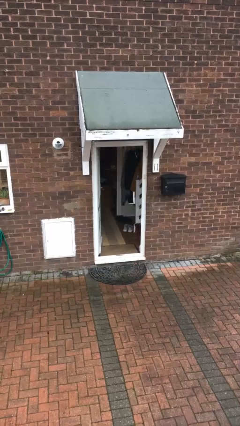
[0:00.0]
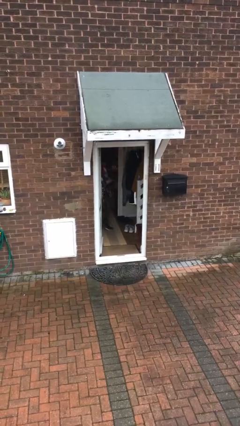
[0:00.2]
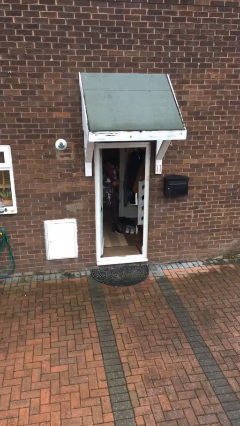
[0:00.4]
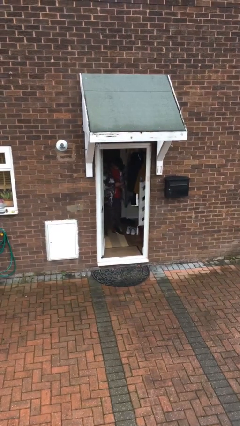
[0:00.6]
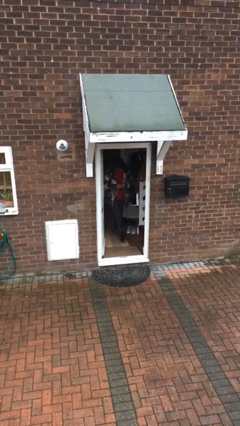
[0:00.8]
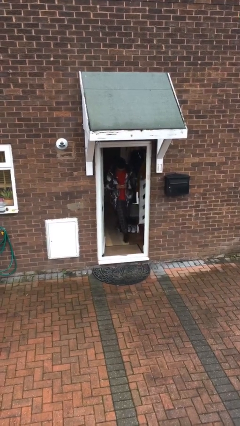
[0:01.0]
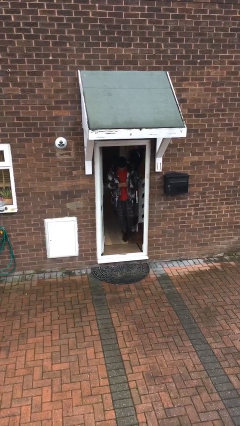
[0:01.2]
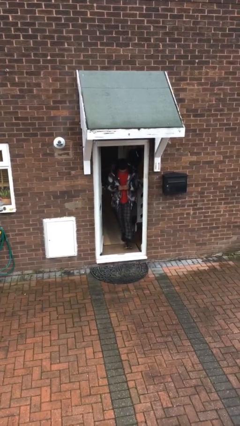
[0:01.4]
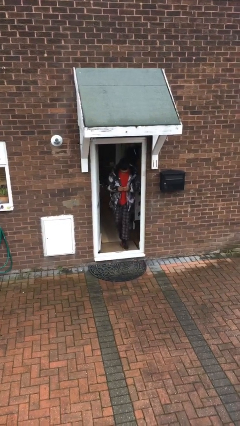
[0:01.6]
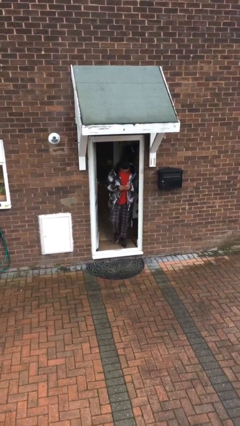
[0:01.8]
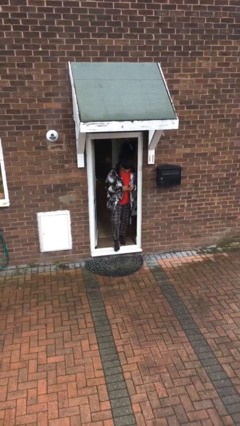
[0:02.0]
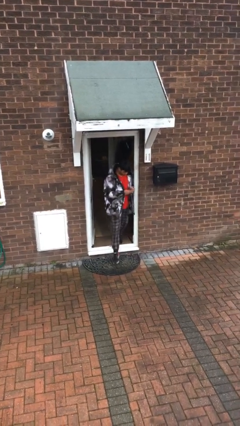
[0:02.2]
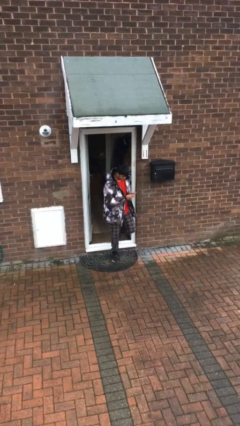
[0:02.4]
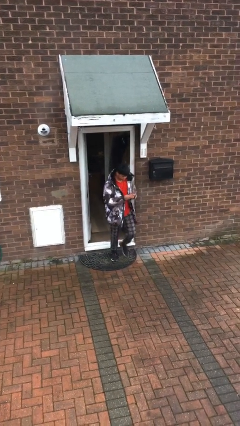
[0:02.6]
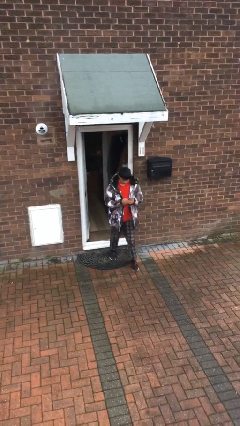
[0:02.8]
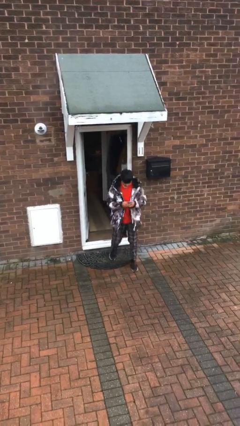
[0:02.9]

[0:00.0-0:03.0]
person enters scene through structure

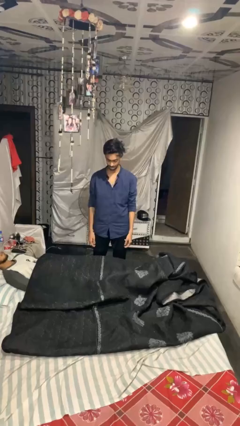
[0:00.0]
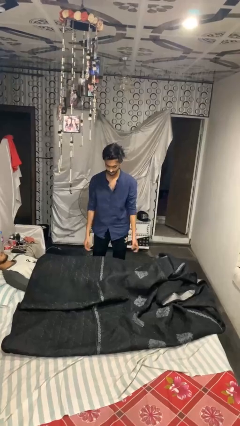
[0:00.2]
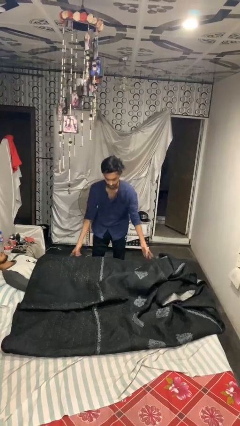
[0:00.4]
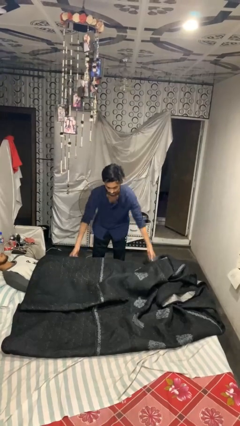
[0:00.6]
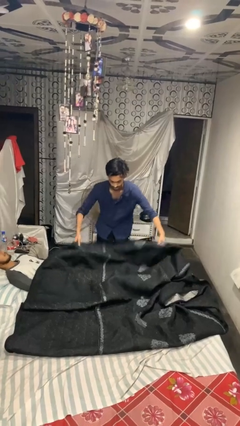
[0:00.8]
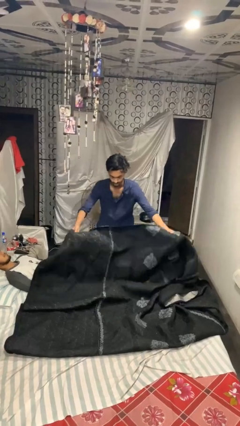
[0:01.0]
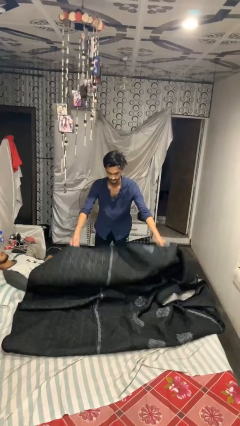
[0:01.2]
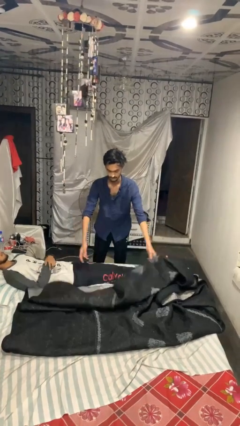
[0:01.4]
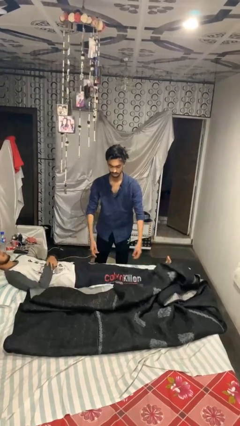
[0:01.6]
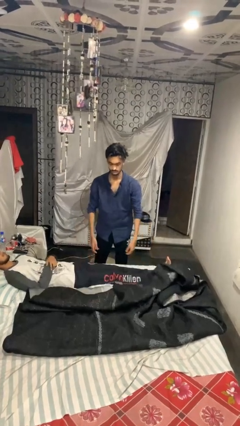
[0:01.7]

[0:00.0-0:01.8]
person uncovers friend with blanket

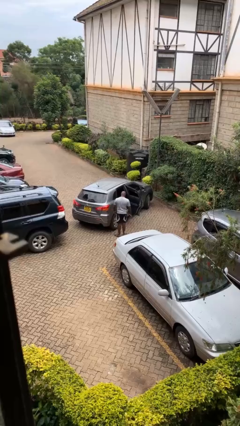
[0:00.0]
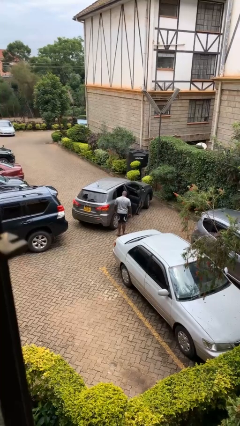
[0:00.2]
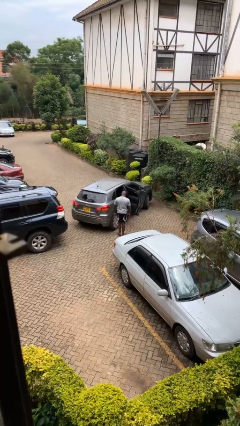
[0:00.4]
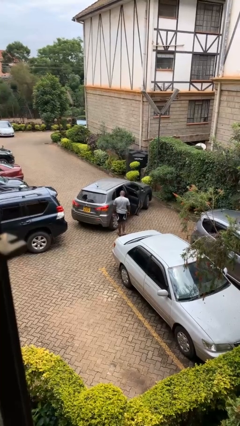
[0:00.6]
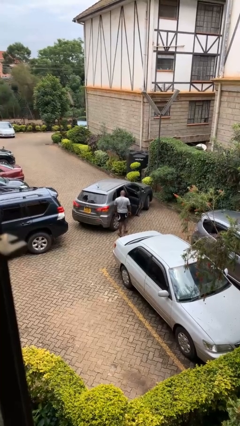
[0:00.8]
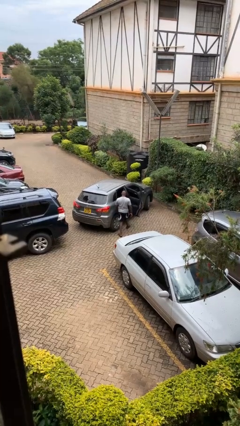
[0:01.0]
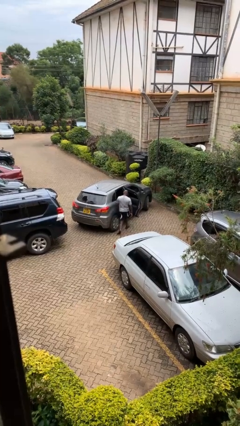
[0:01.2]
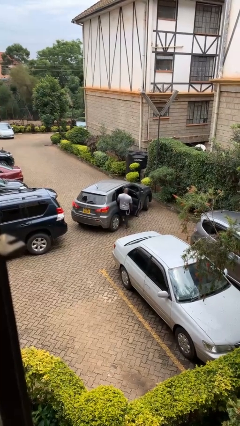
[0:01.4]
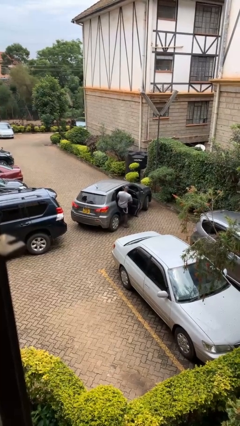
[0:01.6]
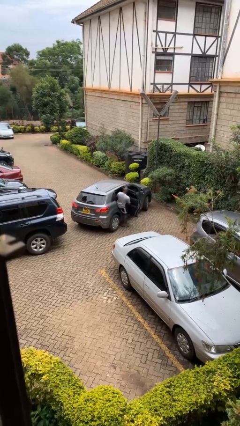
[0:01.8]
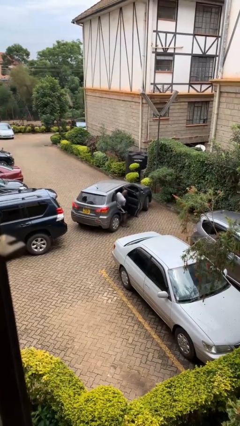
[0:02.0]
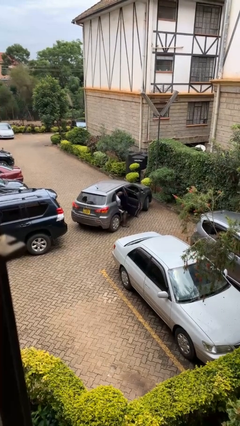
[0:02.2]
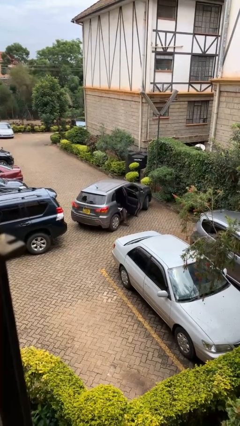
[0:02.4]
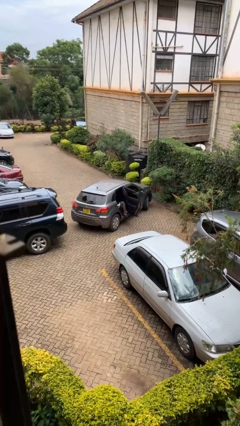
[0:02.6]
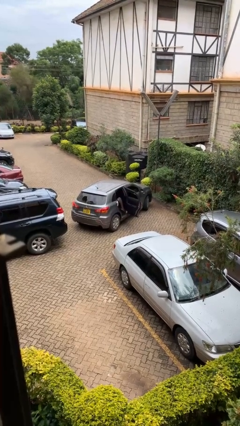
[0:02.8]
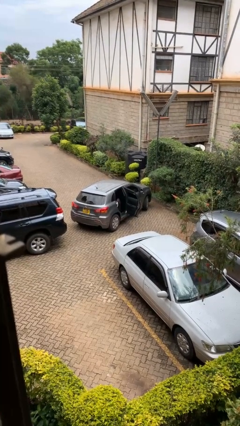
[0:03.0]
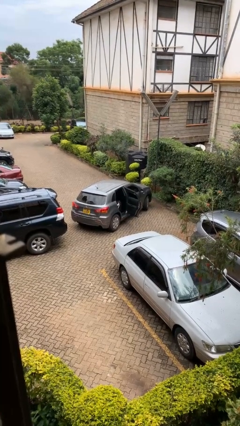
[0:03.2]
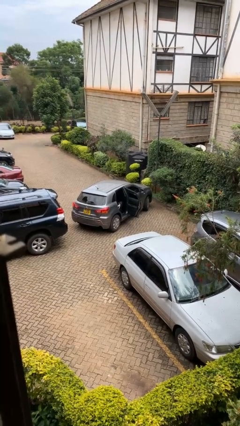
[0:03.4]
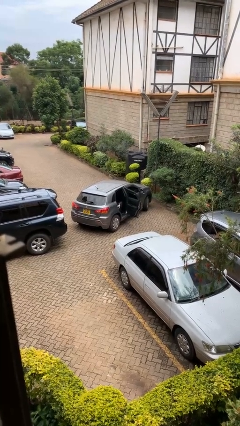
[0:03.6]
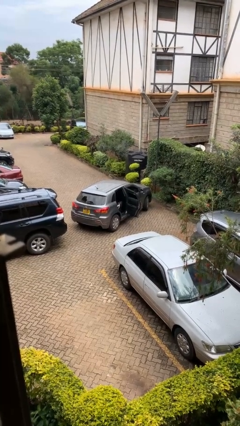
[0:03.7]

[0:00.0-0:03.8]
person enters car

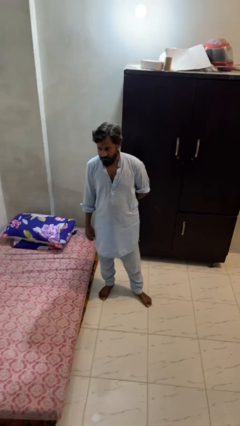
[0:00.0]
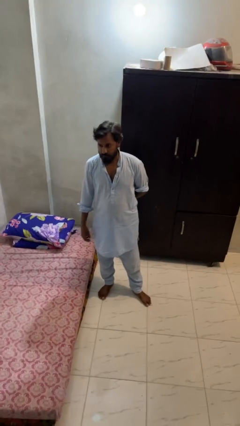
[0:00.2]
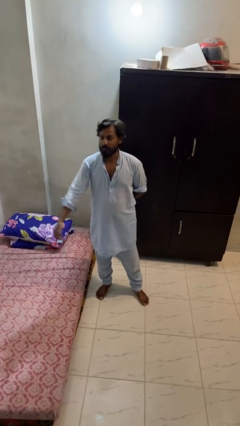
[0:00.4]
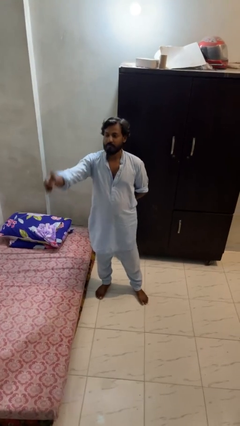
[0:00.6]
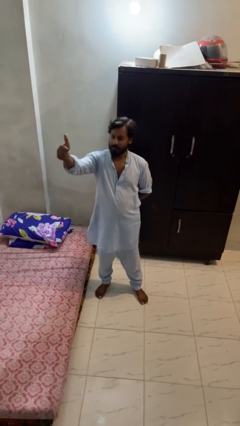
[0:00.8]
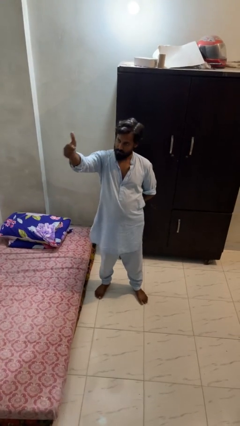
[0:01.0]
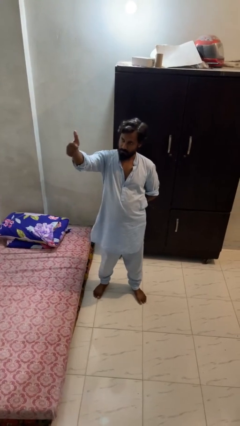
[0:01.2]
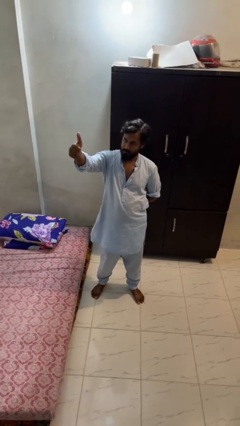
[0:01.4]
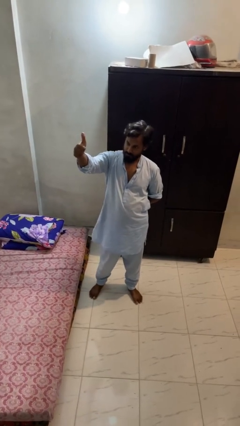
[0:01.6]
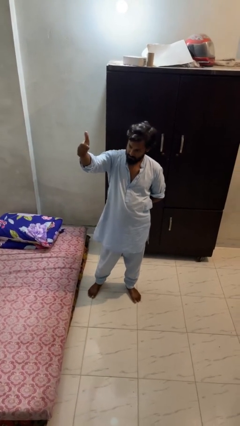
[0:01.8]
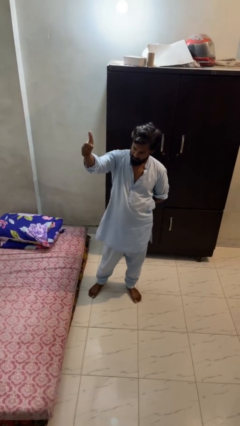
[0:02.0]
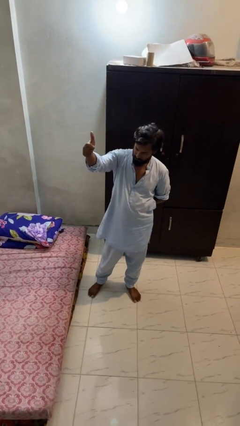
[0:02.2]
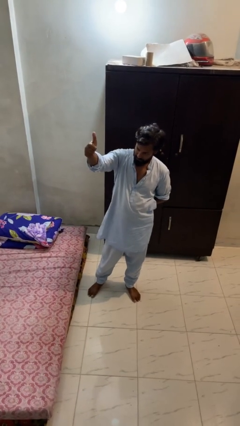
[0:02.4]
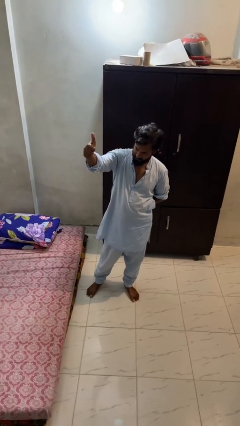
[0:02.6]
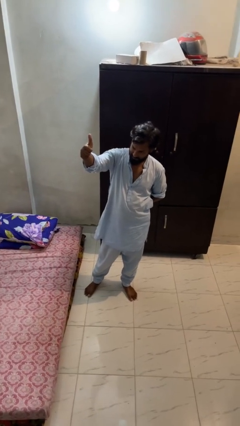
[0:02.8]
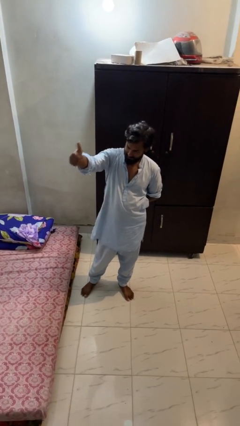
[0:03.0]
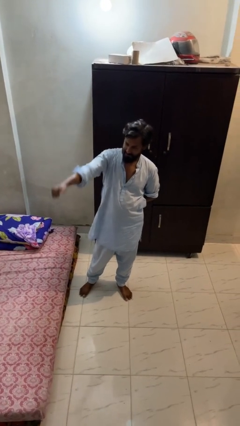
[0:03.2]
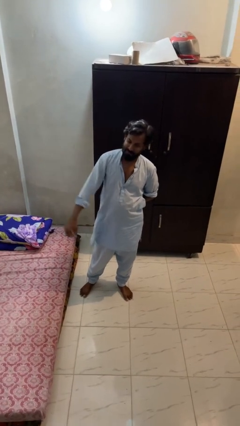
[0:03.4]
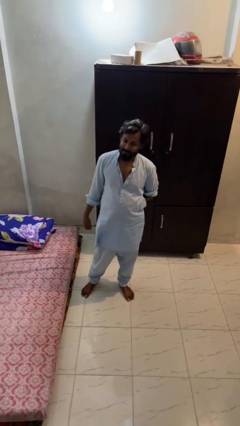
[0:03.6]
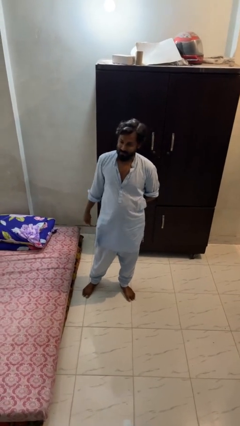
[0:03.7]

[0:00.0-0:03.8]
person gestures thumbs up

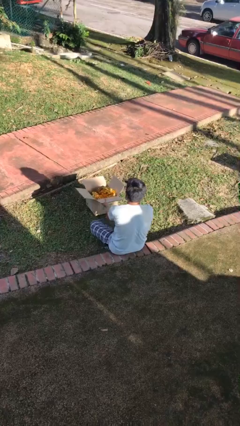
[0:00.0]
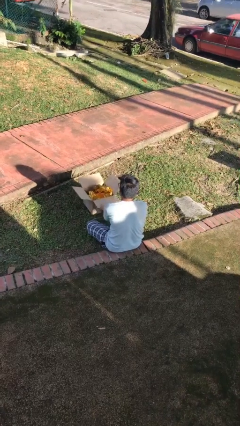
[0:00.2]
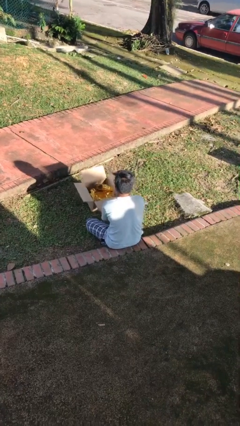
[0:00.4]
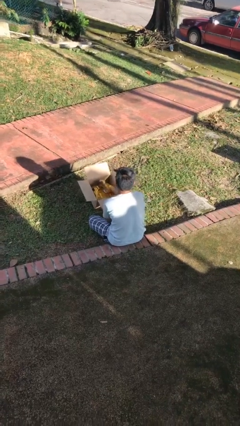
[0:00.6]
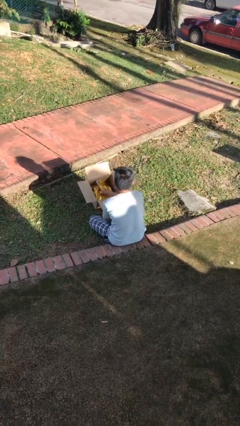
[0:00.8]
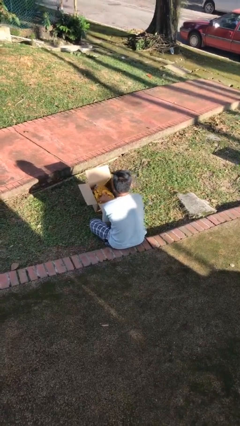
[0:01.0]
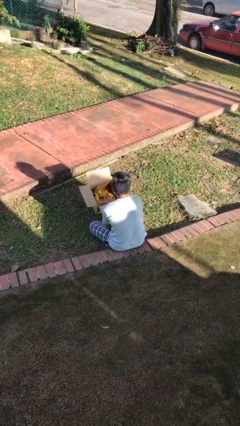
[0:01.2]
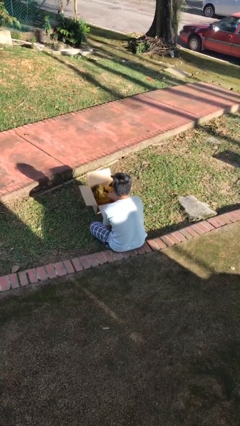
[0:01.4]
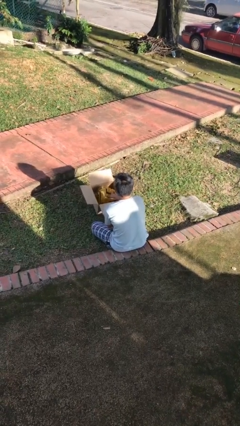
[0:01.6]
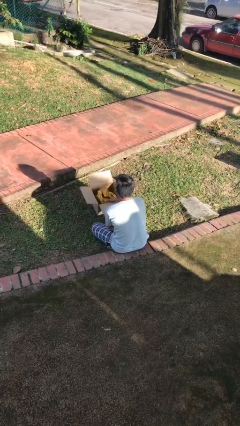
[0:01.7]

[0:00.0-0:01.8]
person searches in box

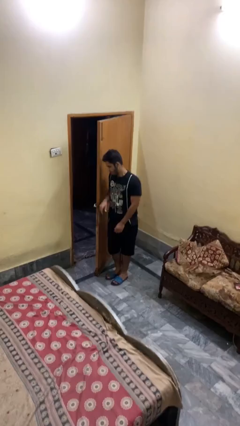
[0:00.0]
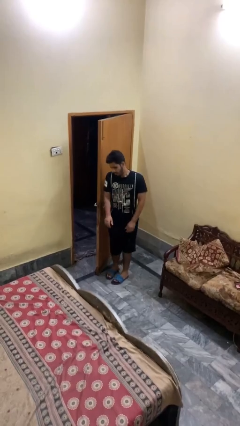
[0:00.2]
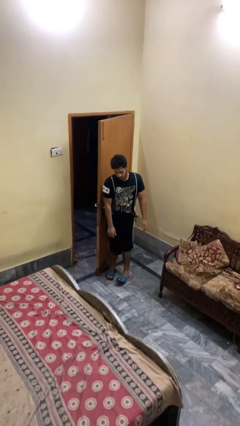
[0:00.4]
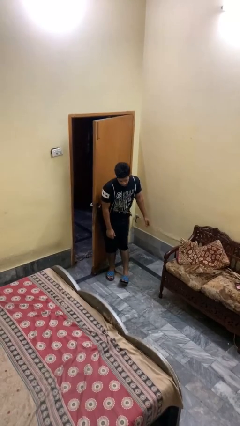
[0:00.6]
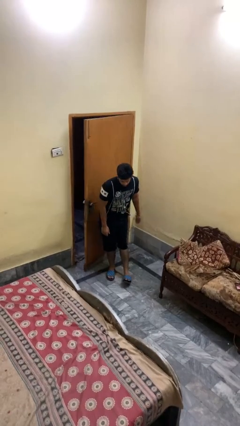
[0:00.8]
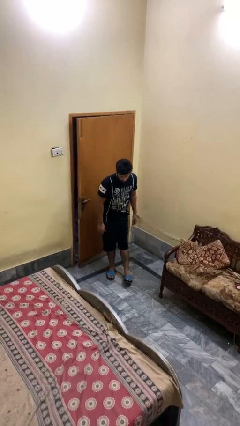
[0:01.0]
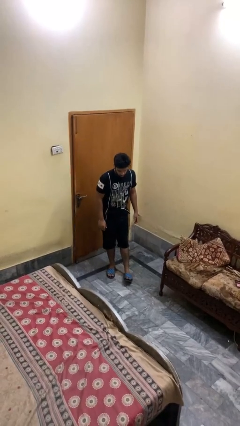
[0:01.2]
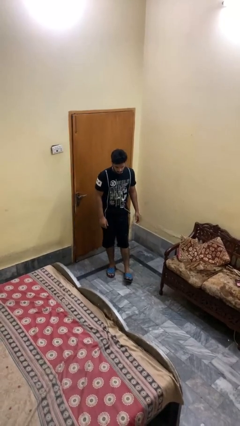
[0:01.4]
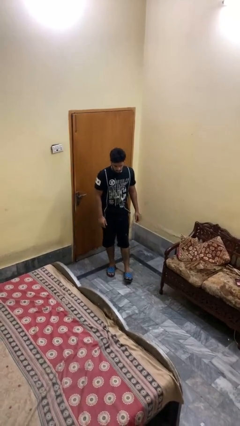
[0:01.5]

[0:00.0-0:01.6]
person closes door with hip

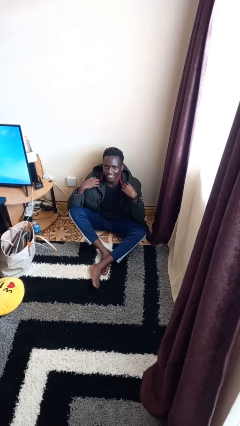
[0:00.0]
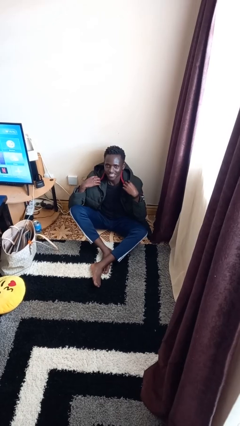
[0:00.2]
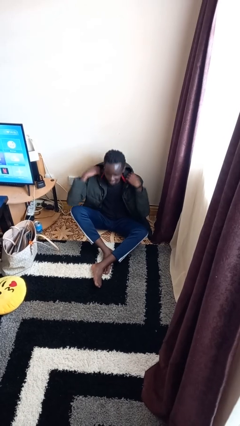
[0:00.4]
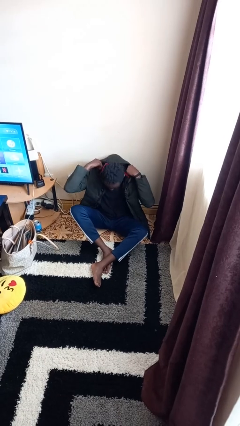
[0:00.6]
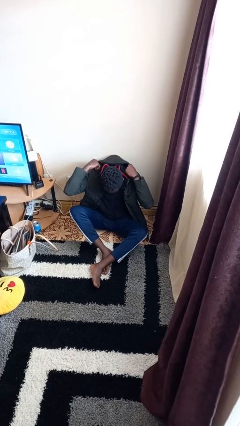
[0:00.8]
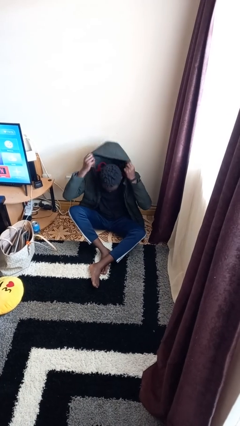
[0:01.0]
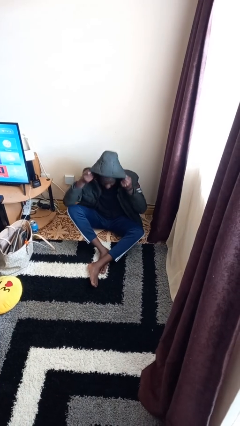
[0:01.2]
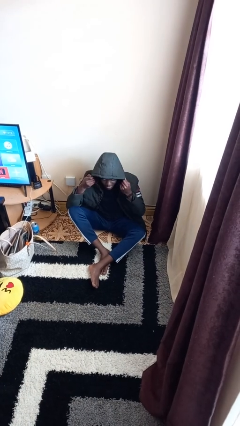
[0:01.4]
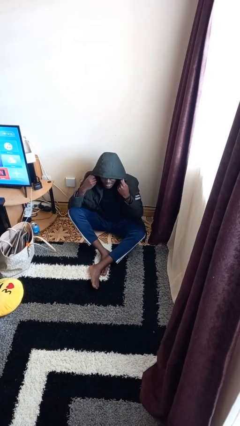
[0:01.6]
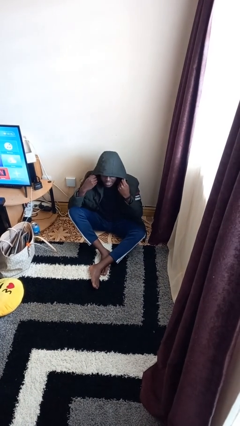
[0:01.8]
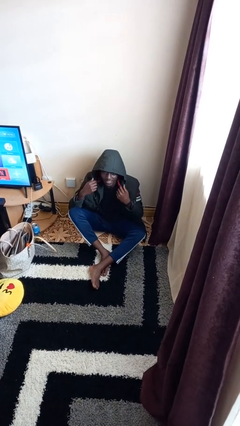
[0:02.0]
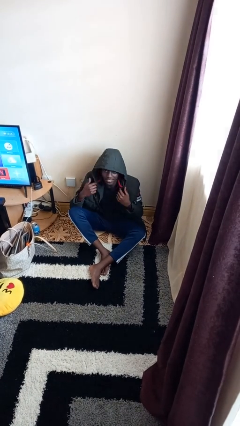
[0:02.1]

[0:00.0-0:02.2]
person puts on hoodie
